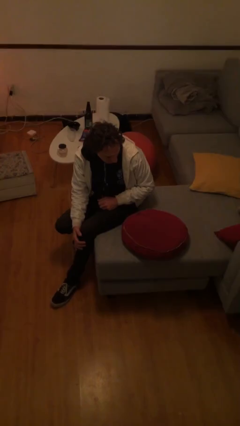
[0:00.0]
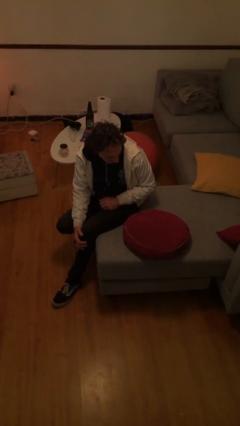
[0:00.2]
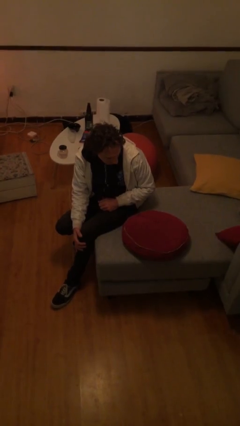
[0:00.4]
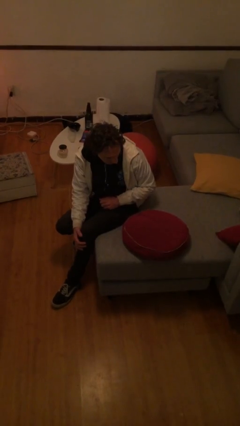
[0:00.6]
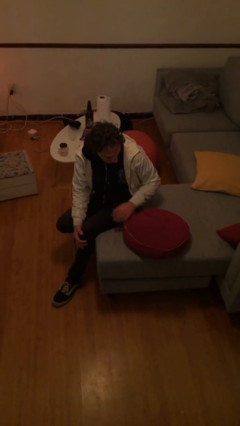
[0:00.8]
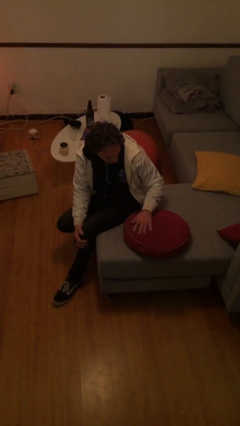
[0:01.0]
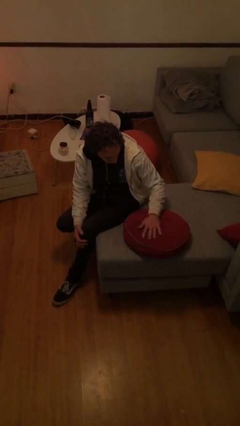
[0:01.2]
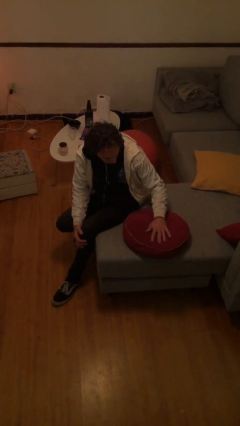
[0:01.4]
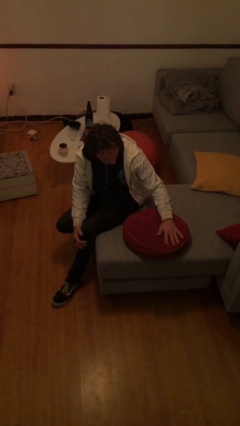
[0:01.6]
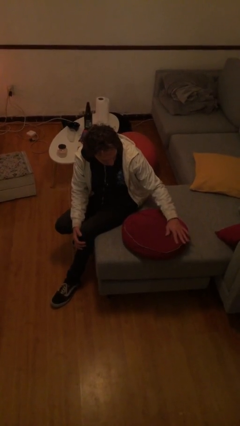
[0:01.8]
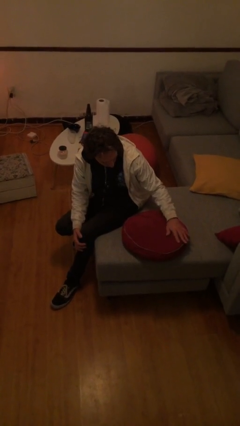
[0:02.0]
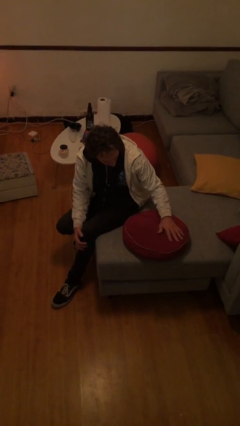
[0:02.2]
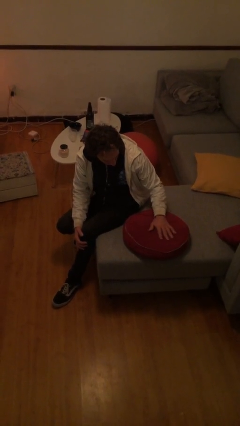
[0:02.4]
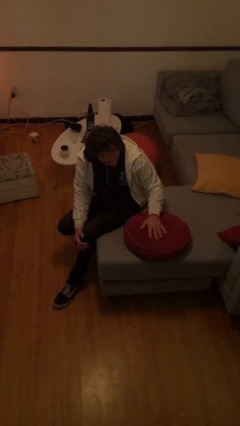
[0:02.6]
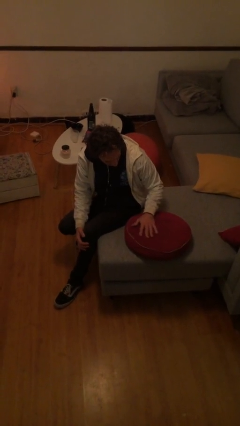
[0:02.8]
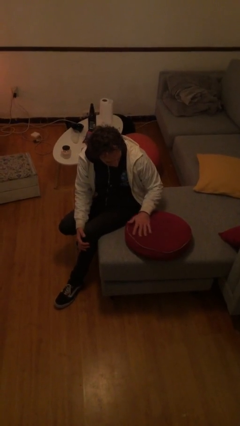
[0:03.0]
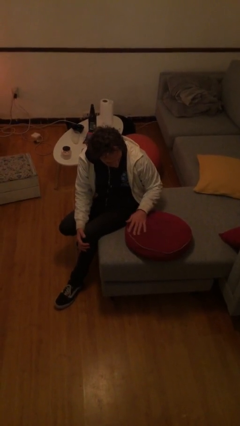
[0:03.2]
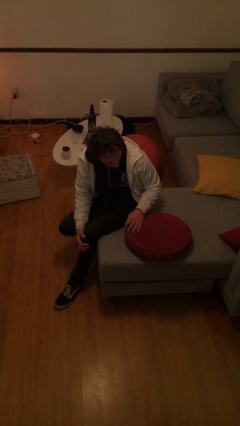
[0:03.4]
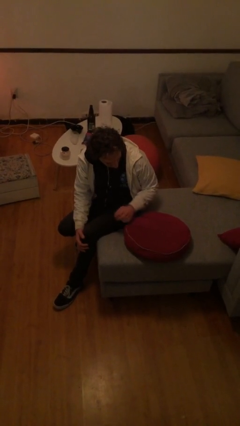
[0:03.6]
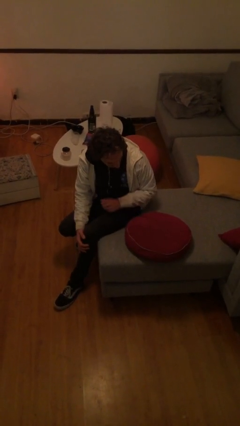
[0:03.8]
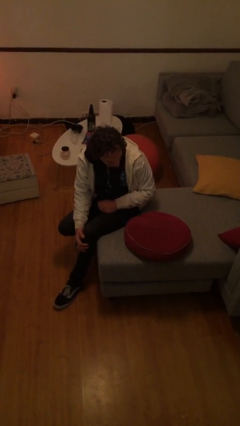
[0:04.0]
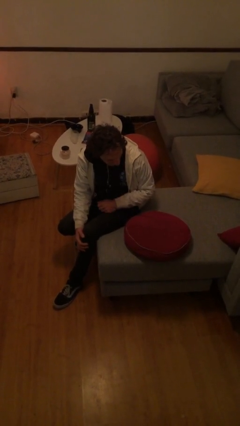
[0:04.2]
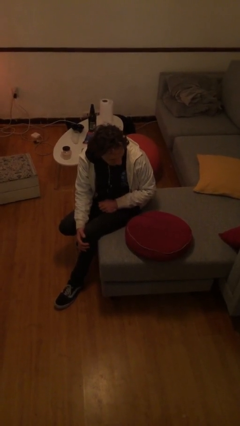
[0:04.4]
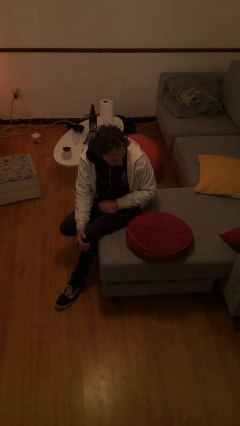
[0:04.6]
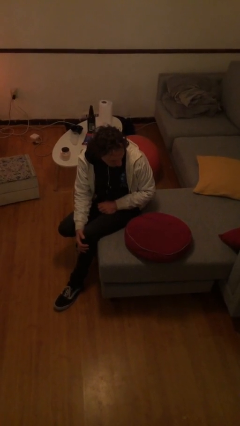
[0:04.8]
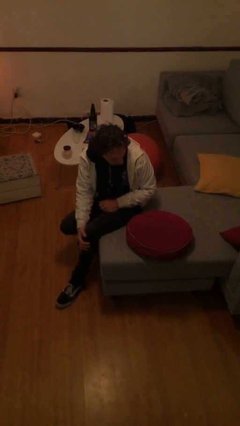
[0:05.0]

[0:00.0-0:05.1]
person waves hand over object

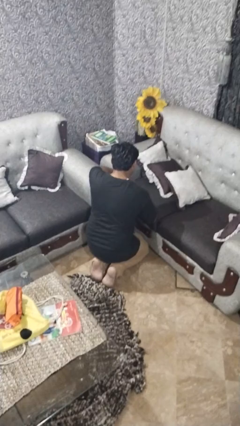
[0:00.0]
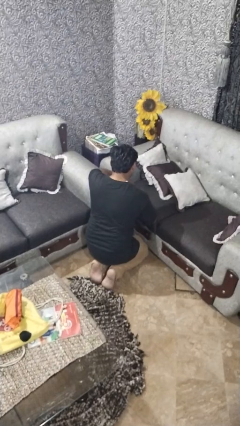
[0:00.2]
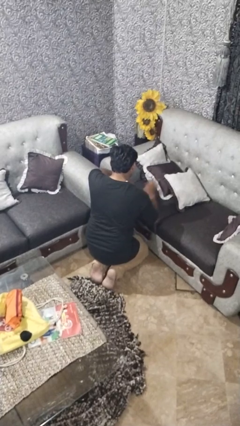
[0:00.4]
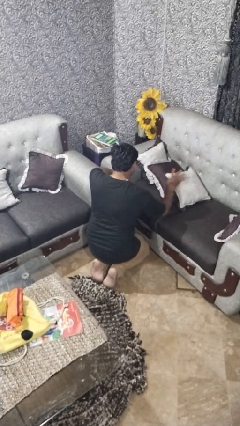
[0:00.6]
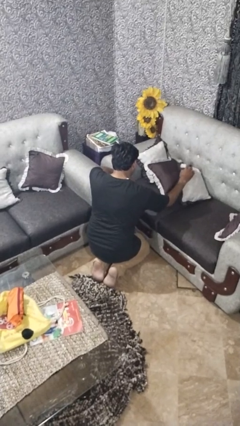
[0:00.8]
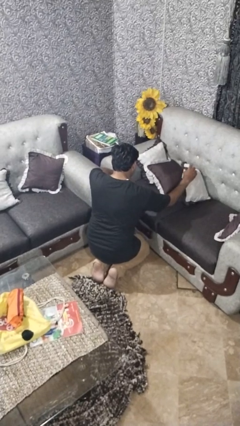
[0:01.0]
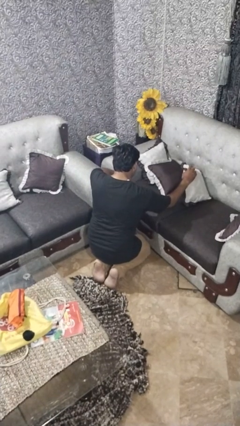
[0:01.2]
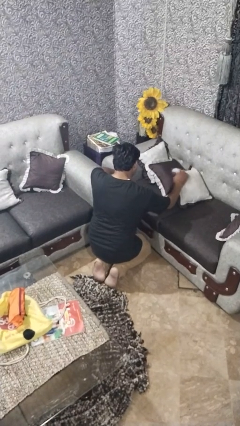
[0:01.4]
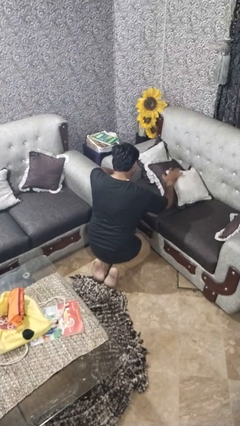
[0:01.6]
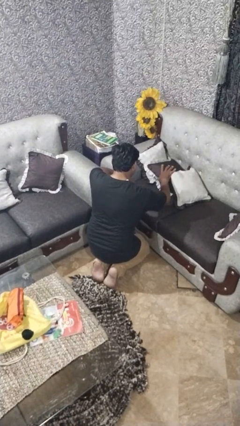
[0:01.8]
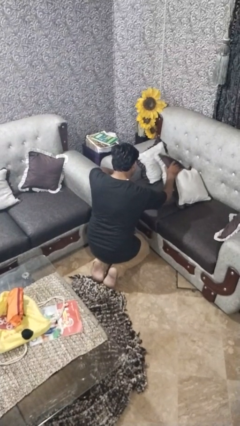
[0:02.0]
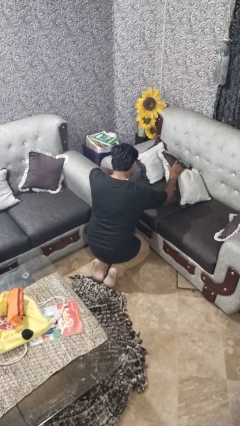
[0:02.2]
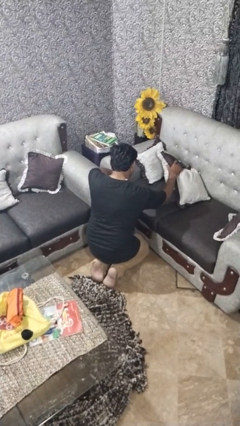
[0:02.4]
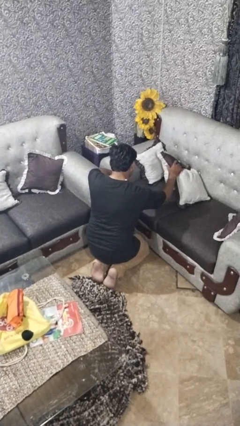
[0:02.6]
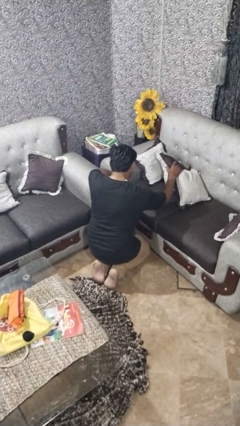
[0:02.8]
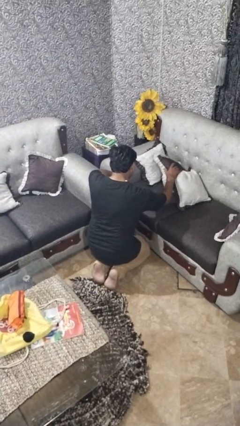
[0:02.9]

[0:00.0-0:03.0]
person searches in couch

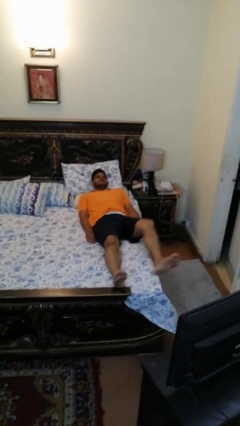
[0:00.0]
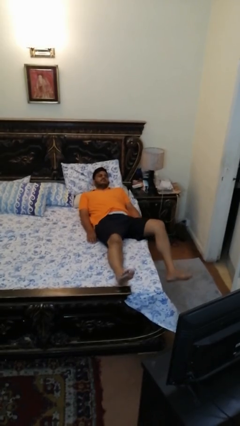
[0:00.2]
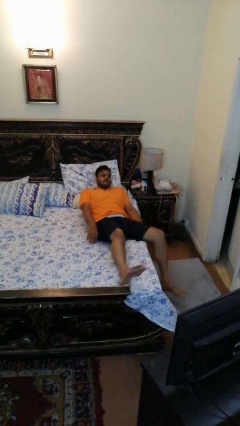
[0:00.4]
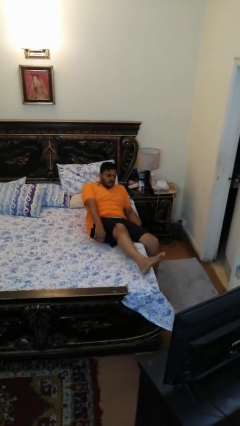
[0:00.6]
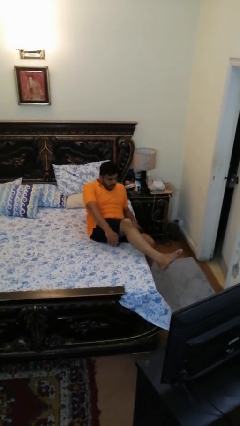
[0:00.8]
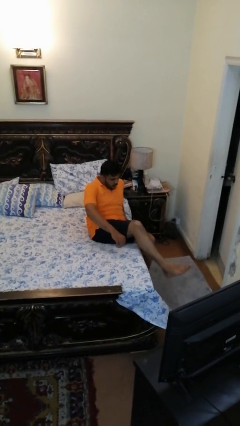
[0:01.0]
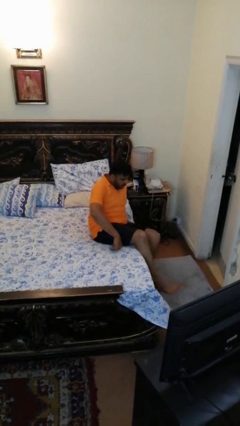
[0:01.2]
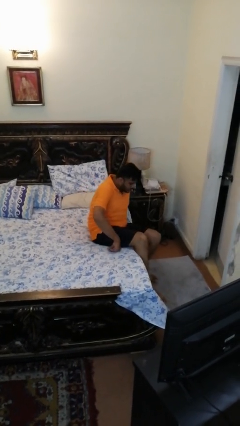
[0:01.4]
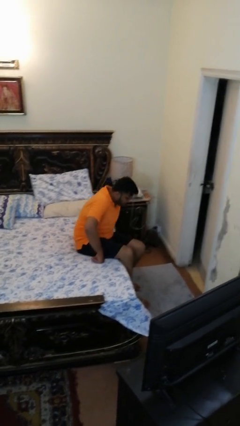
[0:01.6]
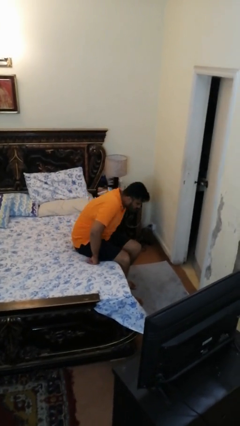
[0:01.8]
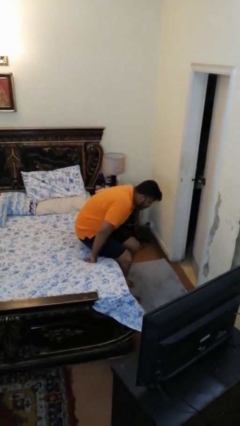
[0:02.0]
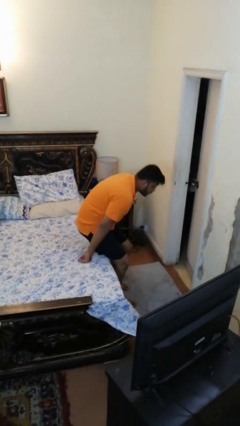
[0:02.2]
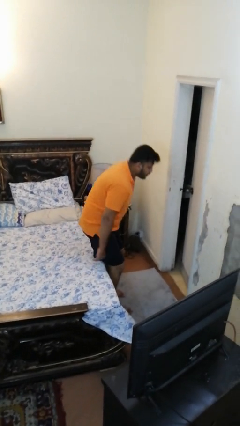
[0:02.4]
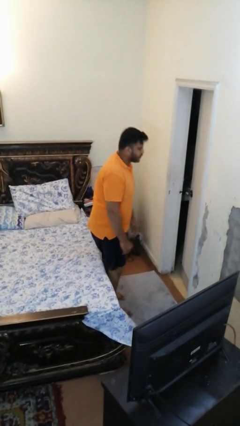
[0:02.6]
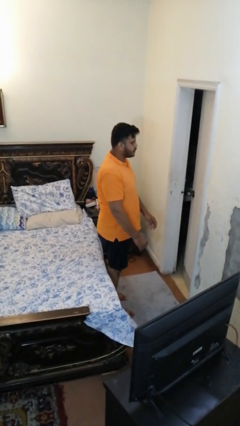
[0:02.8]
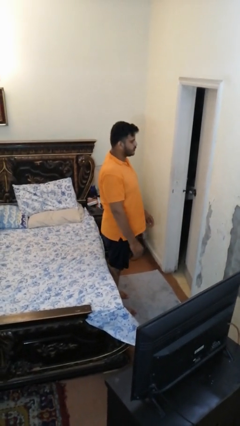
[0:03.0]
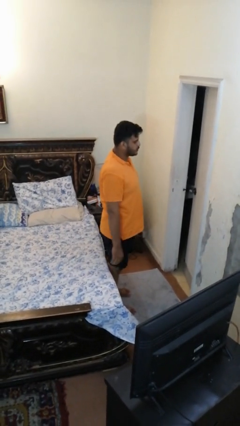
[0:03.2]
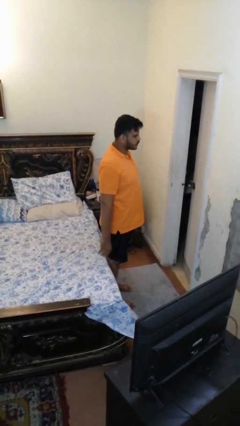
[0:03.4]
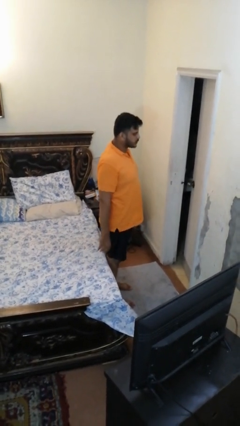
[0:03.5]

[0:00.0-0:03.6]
person stands up

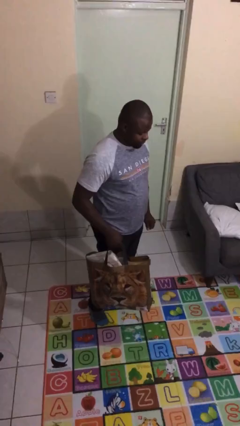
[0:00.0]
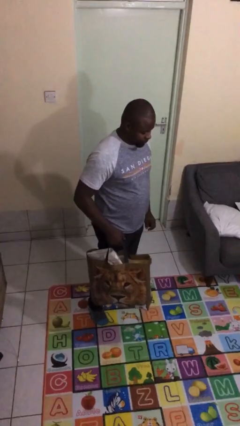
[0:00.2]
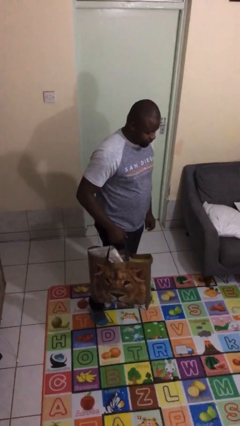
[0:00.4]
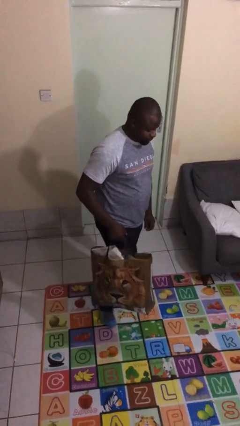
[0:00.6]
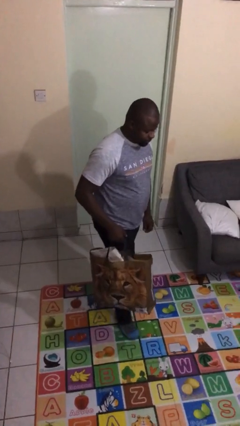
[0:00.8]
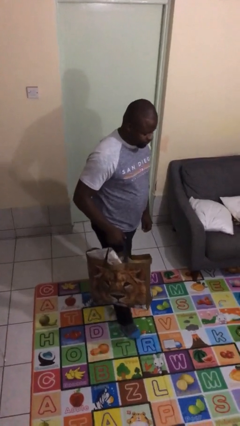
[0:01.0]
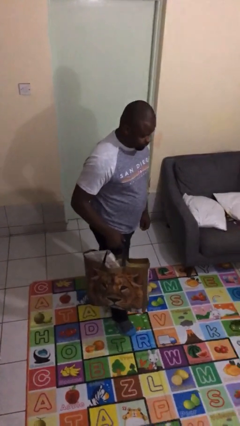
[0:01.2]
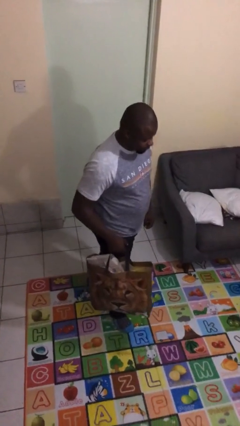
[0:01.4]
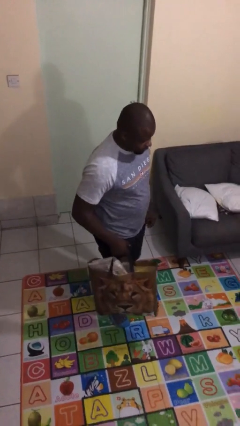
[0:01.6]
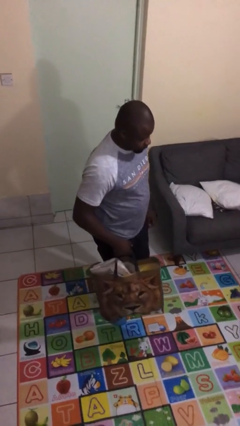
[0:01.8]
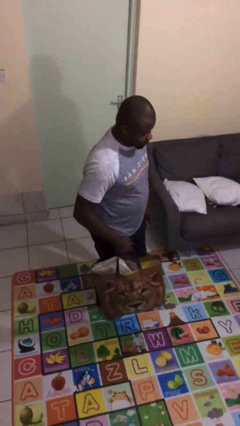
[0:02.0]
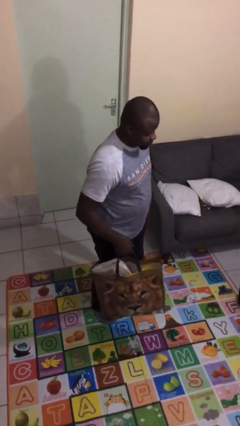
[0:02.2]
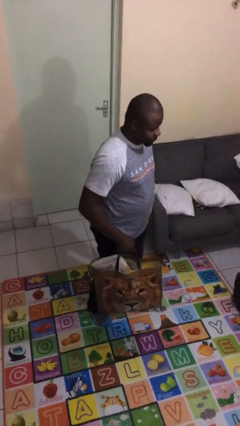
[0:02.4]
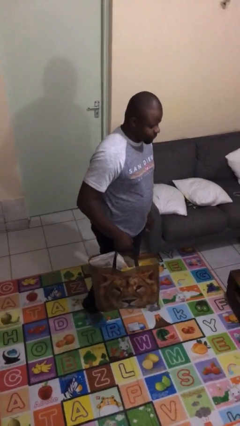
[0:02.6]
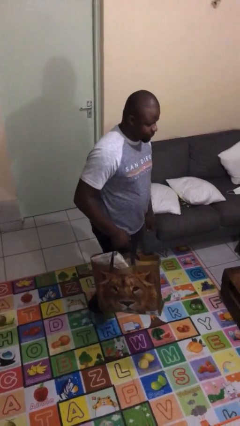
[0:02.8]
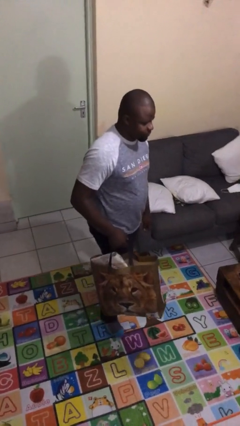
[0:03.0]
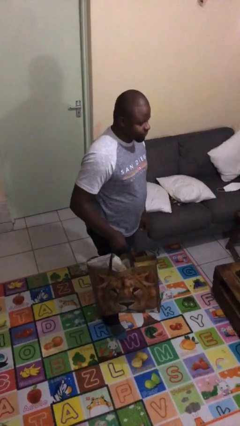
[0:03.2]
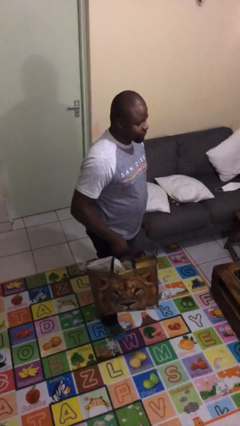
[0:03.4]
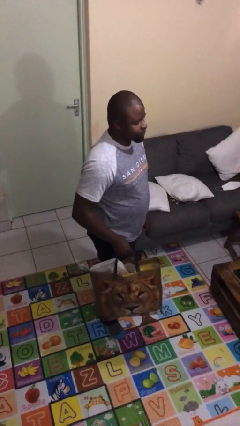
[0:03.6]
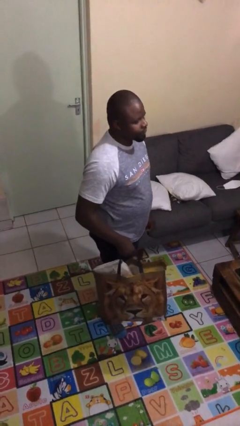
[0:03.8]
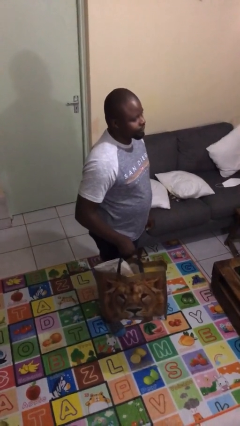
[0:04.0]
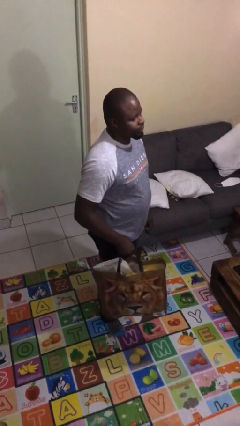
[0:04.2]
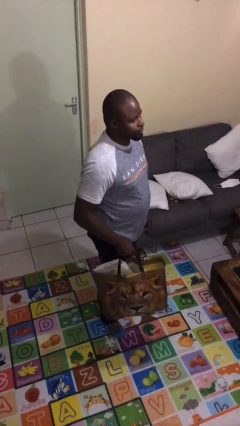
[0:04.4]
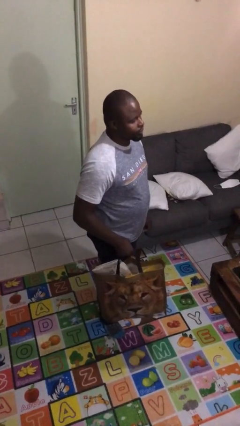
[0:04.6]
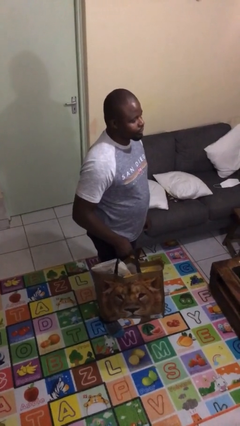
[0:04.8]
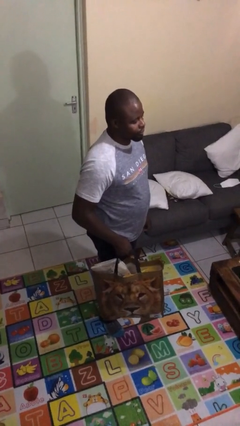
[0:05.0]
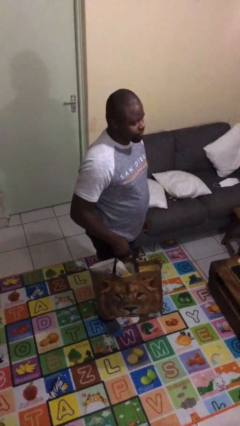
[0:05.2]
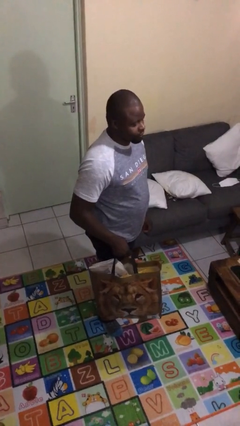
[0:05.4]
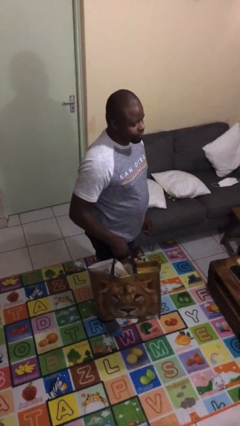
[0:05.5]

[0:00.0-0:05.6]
person carries groceries
